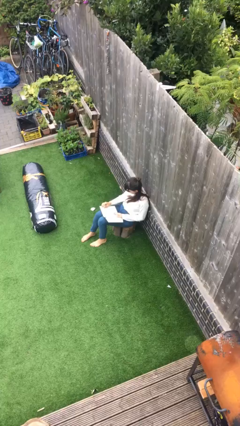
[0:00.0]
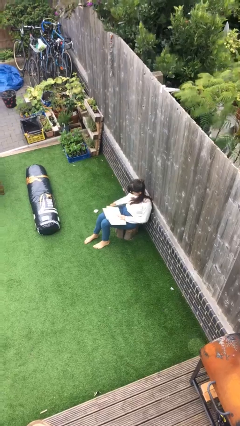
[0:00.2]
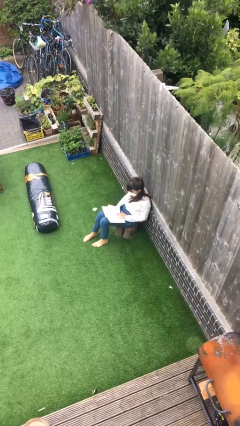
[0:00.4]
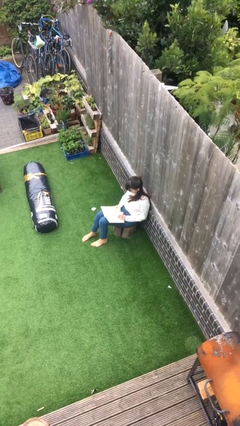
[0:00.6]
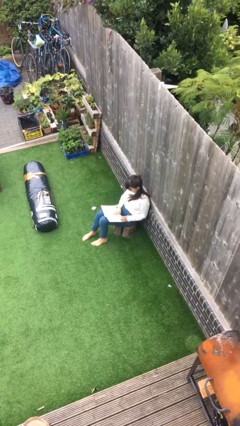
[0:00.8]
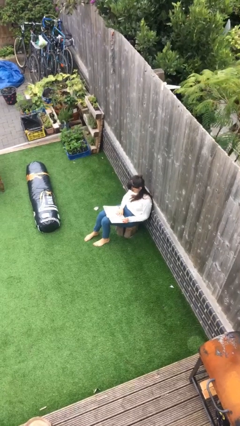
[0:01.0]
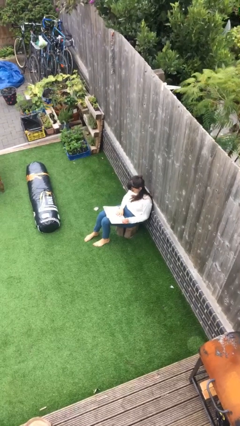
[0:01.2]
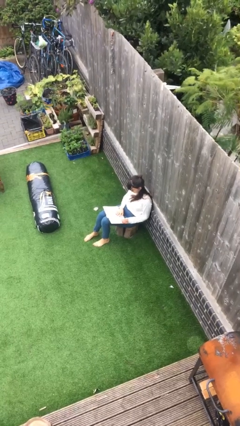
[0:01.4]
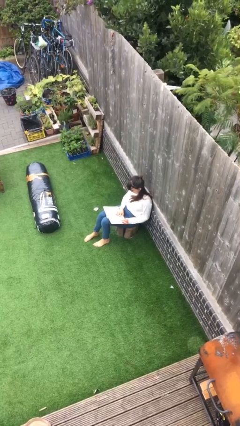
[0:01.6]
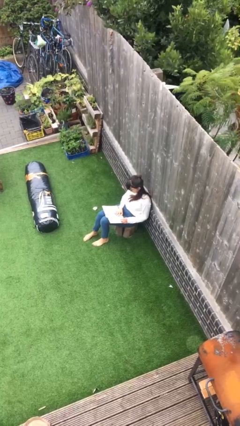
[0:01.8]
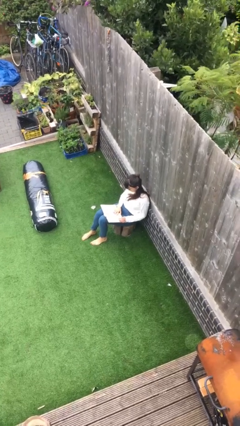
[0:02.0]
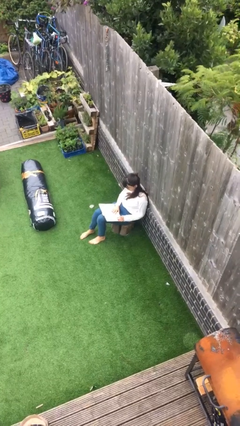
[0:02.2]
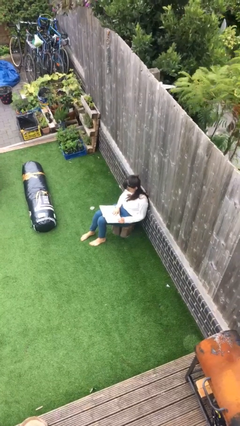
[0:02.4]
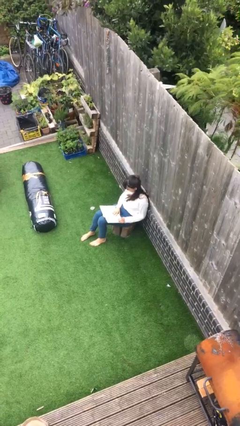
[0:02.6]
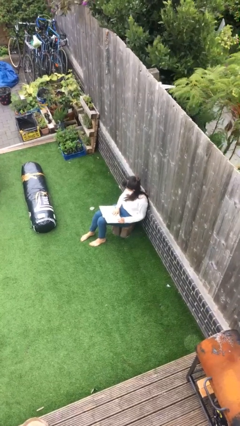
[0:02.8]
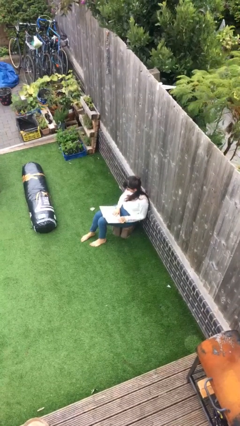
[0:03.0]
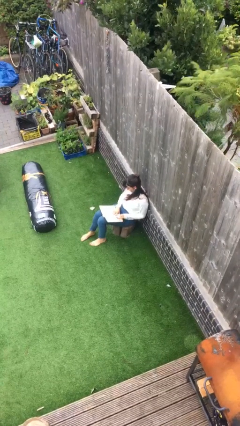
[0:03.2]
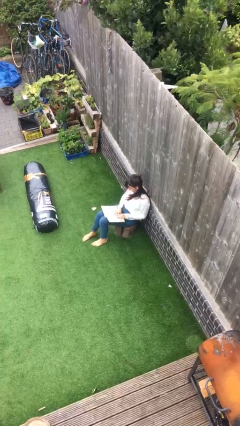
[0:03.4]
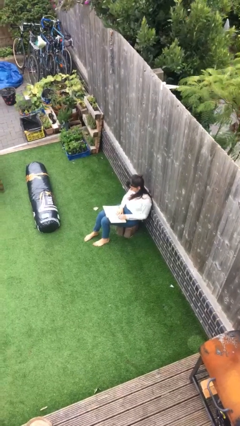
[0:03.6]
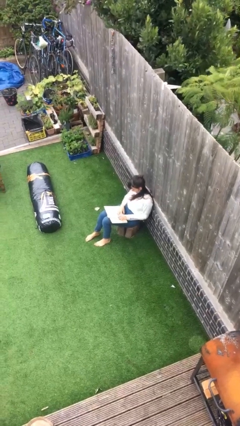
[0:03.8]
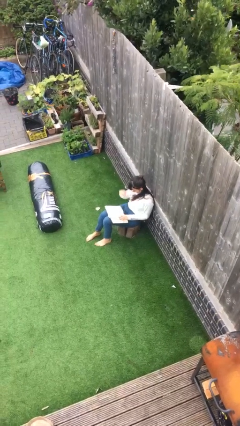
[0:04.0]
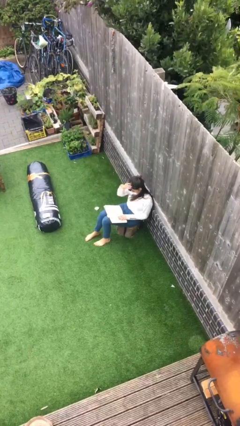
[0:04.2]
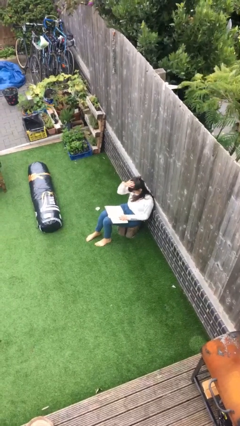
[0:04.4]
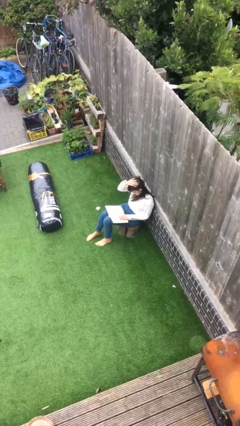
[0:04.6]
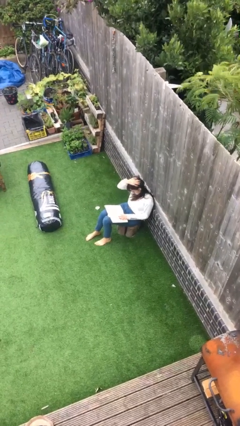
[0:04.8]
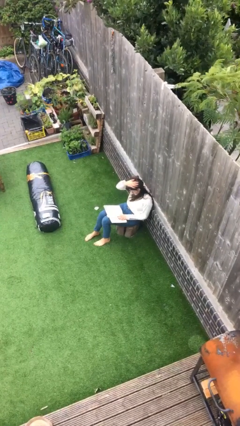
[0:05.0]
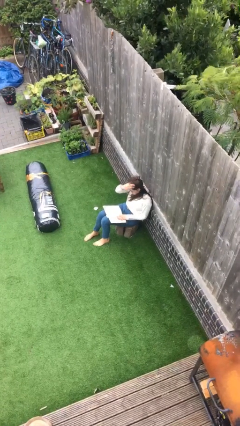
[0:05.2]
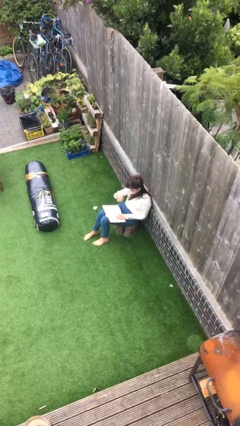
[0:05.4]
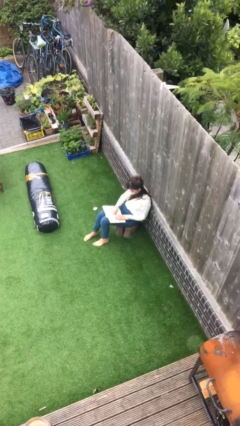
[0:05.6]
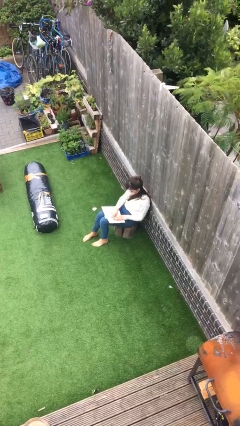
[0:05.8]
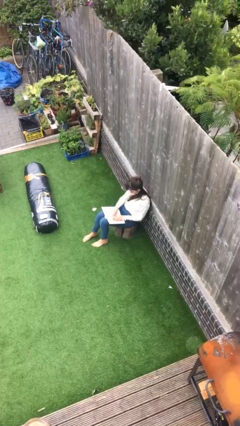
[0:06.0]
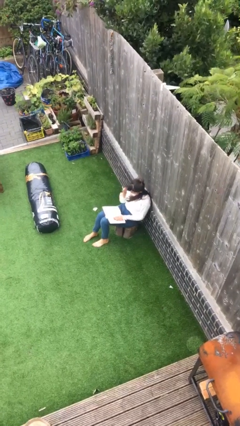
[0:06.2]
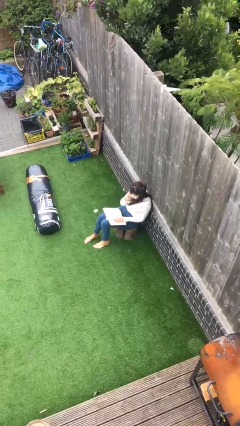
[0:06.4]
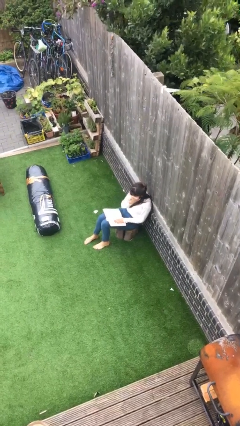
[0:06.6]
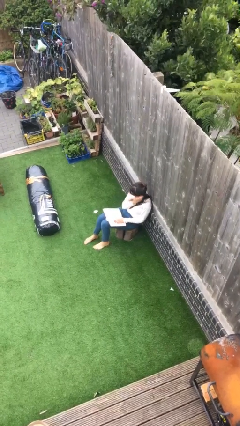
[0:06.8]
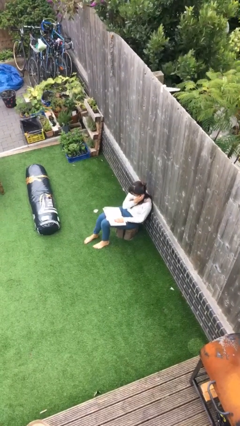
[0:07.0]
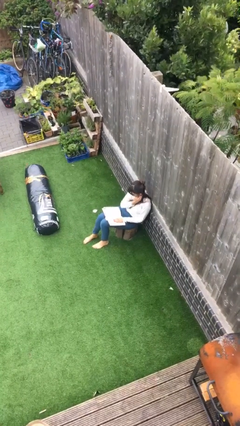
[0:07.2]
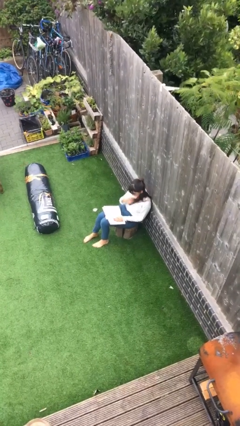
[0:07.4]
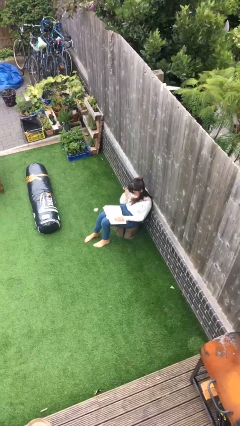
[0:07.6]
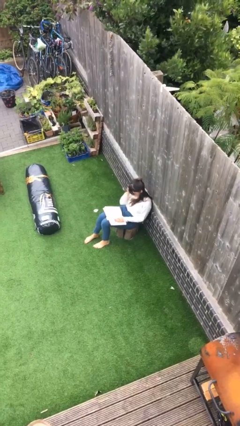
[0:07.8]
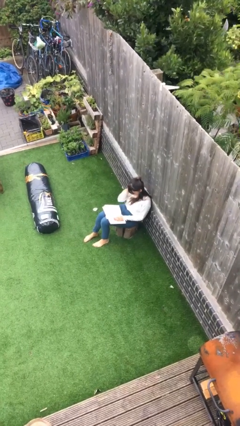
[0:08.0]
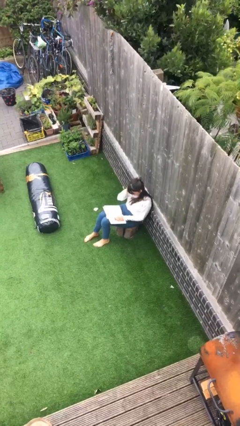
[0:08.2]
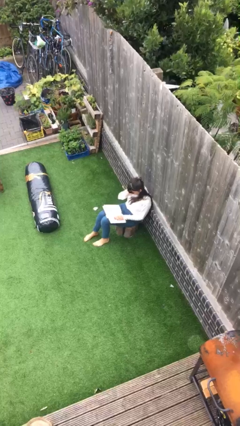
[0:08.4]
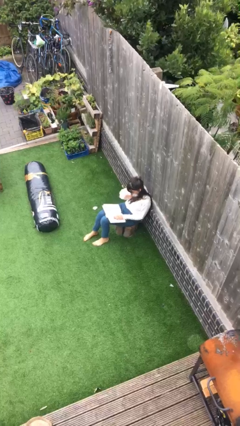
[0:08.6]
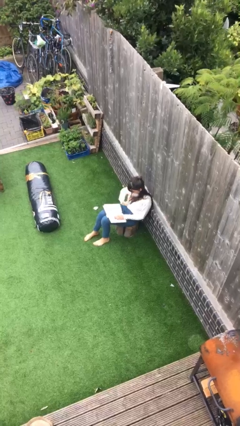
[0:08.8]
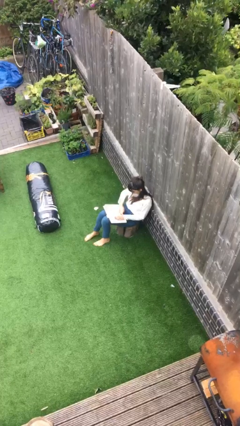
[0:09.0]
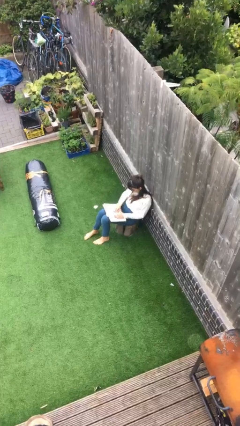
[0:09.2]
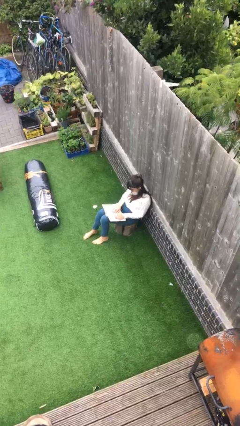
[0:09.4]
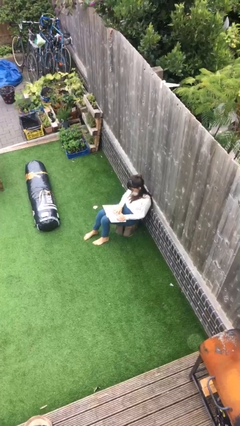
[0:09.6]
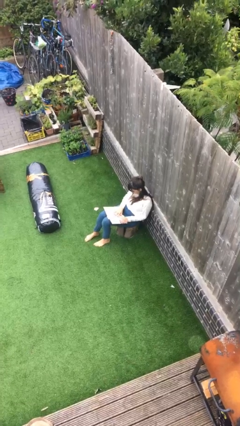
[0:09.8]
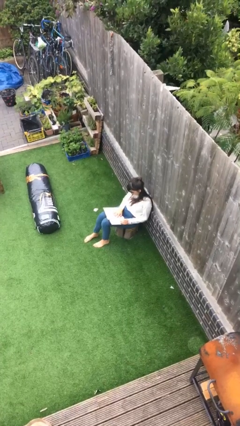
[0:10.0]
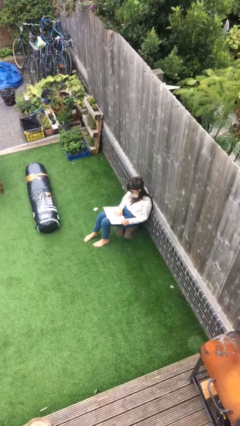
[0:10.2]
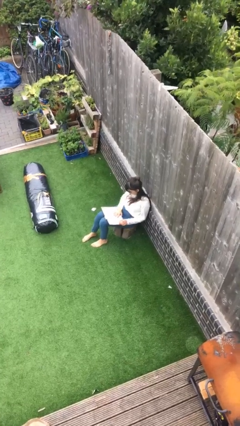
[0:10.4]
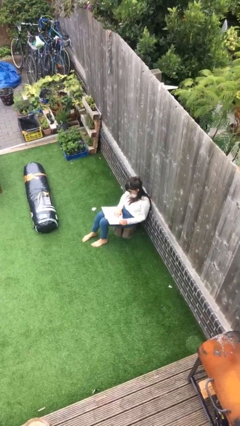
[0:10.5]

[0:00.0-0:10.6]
person reads document

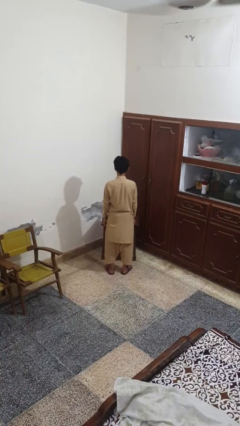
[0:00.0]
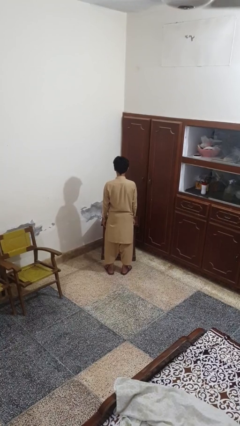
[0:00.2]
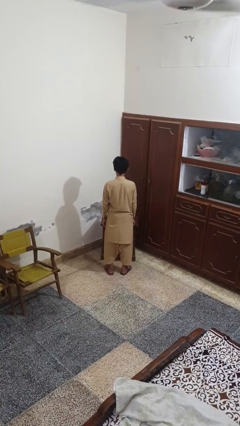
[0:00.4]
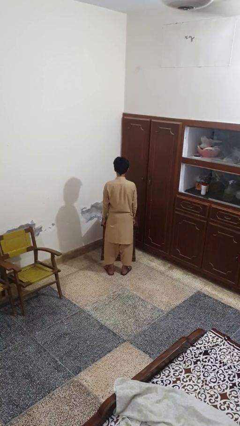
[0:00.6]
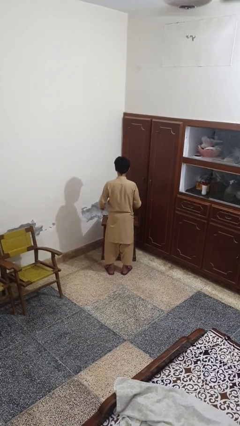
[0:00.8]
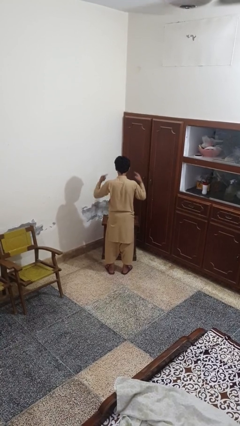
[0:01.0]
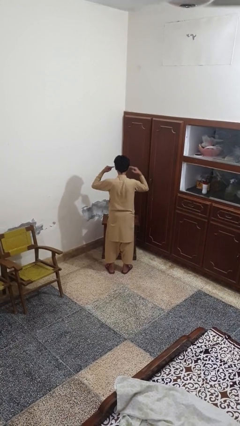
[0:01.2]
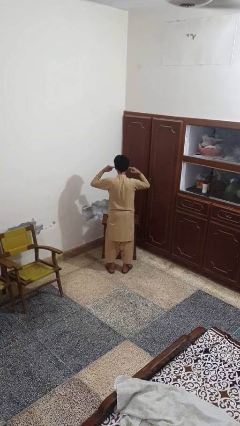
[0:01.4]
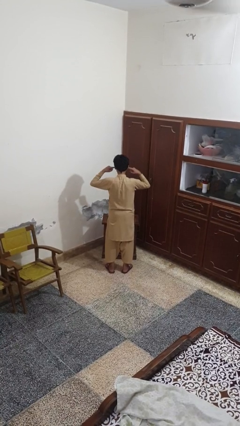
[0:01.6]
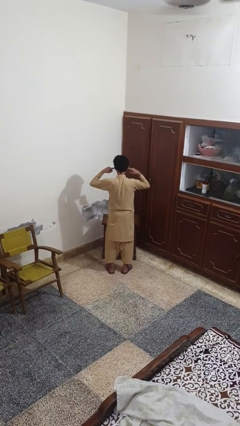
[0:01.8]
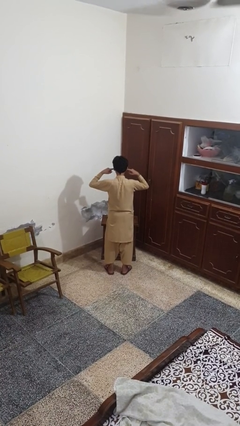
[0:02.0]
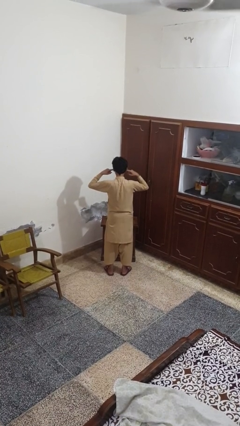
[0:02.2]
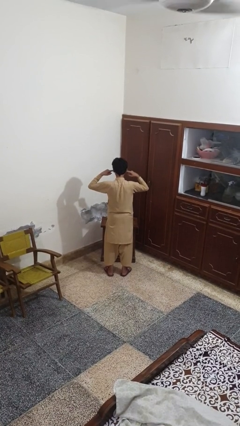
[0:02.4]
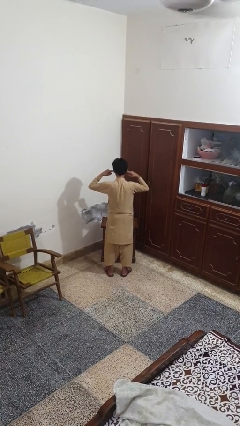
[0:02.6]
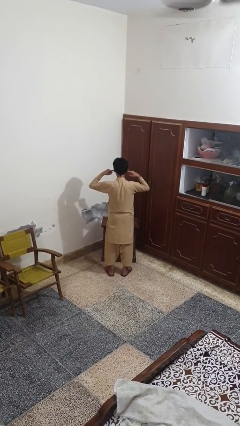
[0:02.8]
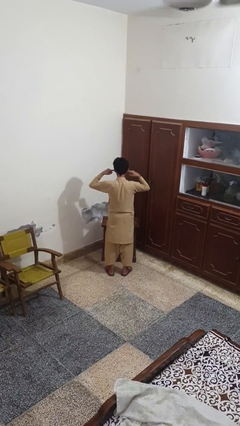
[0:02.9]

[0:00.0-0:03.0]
person puts fingers in ear

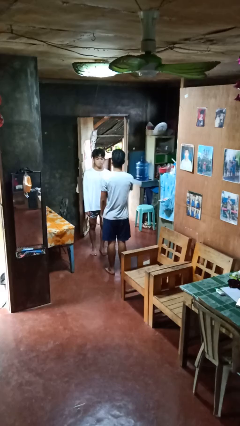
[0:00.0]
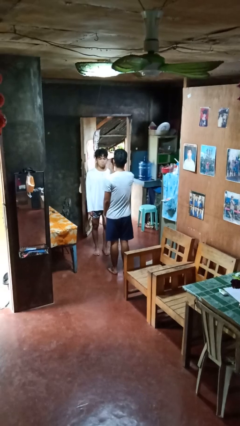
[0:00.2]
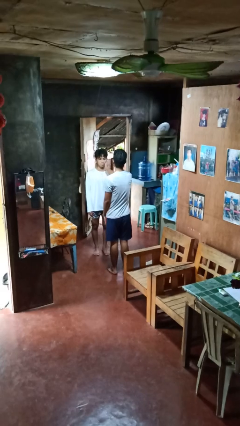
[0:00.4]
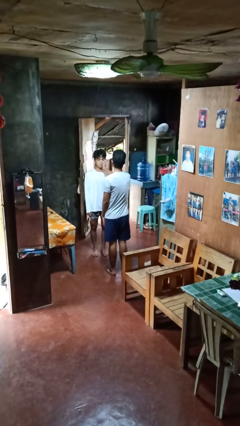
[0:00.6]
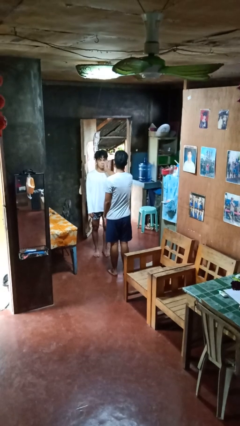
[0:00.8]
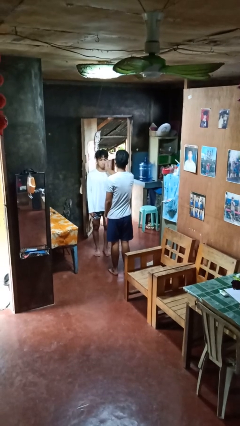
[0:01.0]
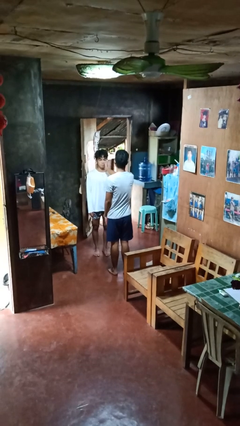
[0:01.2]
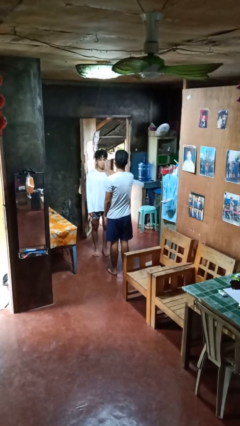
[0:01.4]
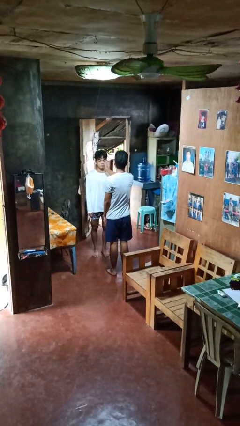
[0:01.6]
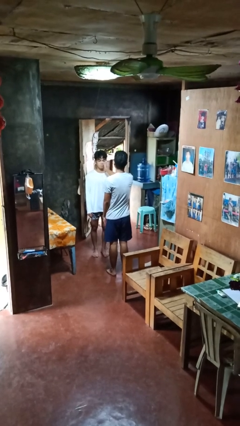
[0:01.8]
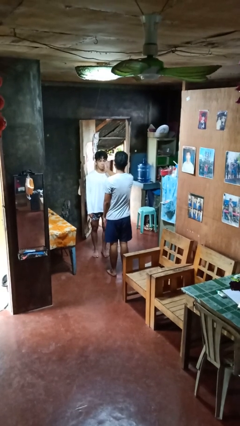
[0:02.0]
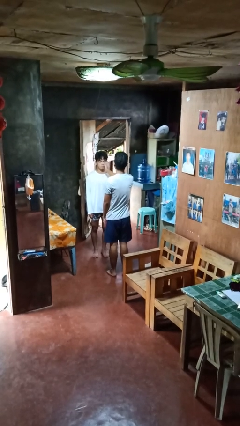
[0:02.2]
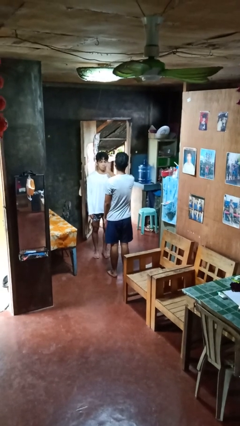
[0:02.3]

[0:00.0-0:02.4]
person touches face of person

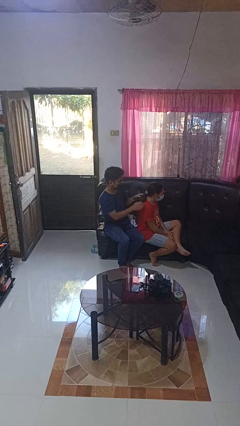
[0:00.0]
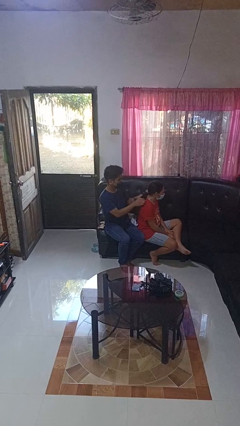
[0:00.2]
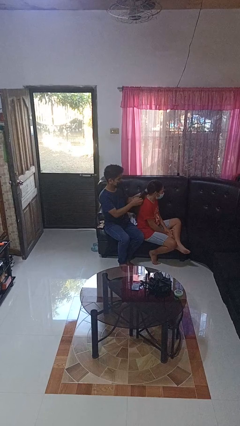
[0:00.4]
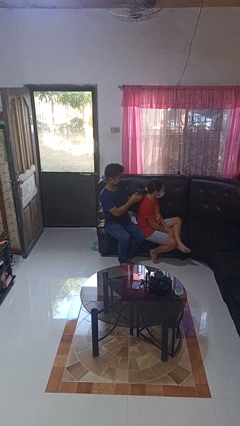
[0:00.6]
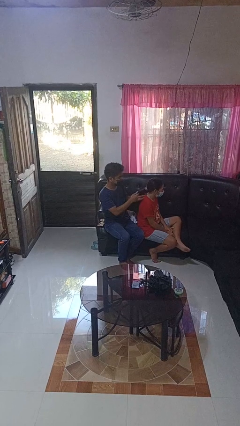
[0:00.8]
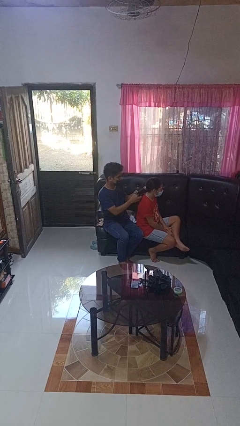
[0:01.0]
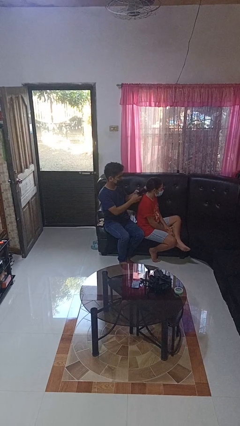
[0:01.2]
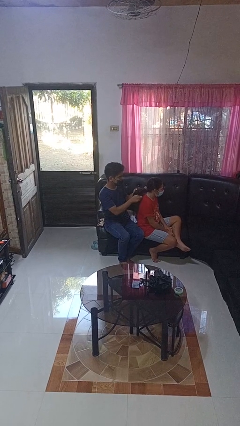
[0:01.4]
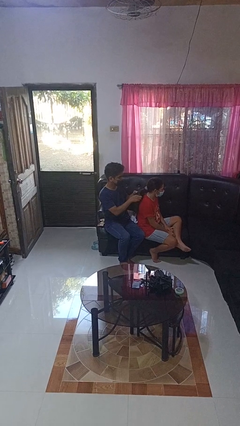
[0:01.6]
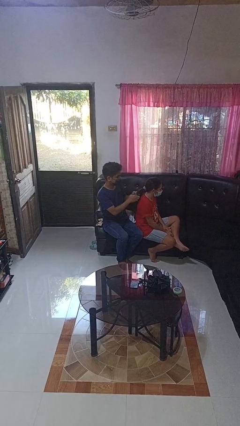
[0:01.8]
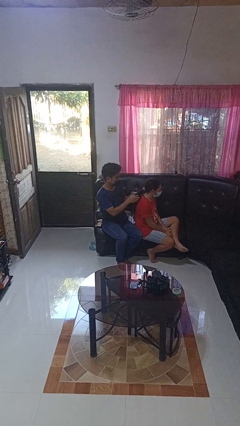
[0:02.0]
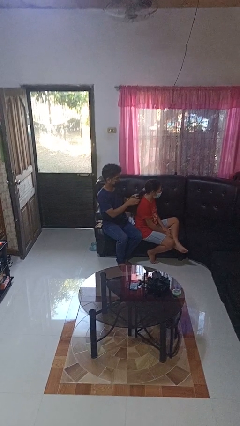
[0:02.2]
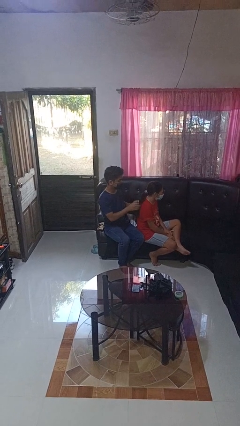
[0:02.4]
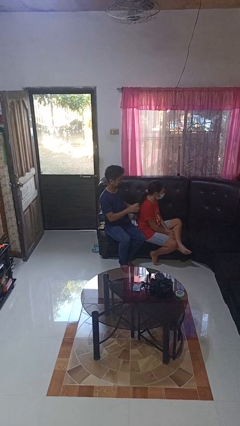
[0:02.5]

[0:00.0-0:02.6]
person braids hair of person
